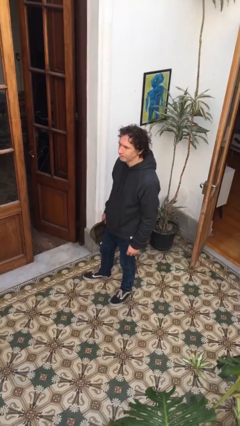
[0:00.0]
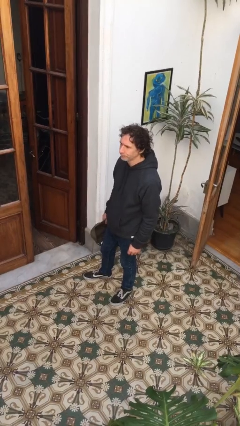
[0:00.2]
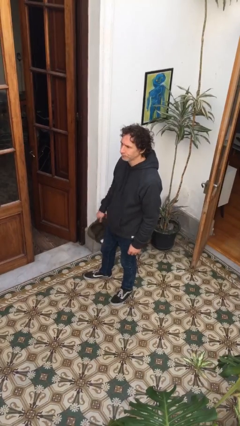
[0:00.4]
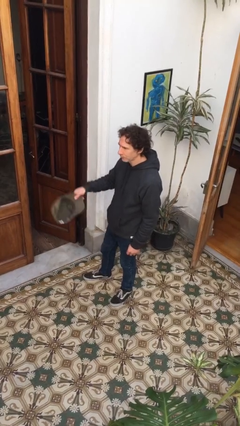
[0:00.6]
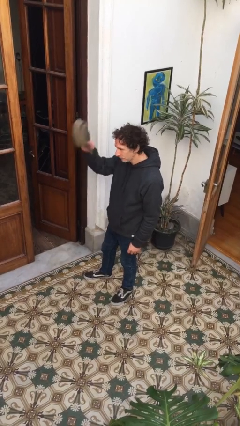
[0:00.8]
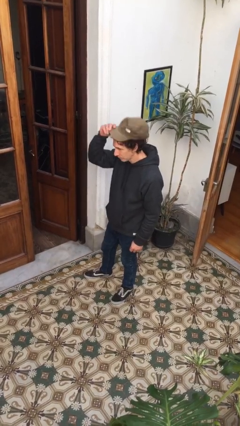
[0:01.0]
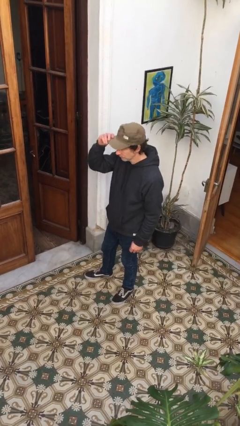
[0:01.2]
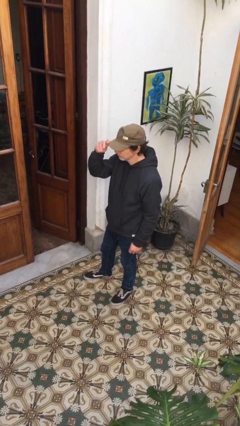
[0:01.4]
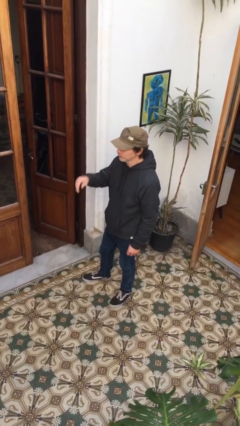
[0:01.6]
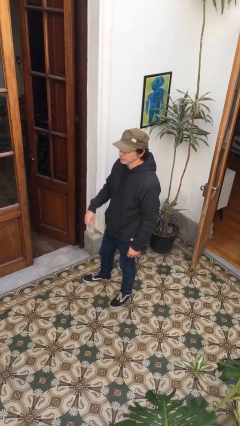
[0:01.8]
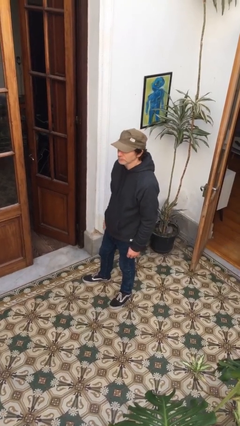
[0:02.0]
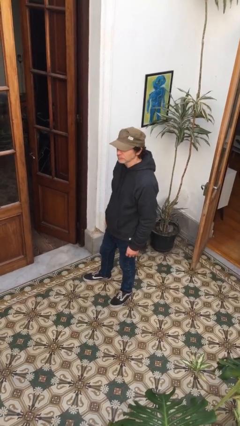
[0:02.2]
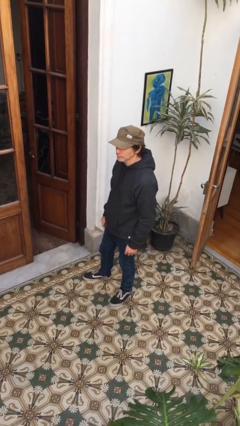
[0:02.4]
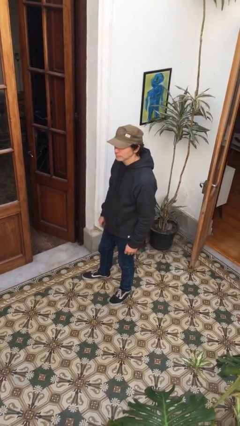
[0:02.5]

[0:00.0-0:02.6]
person puts on hat

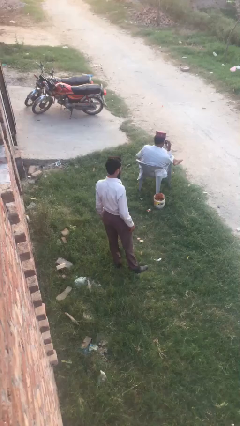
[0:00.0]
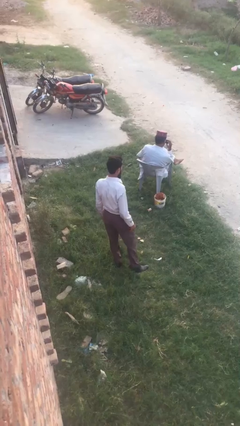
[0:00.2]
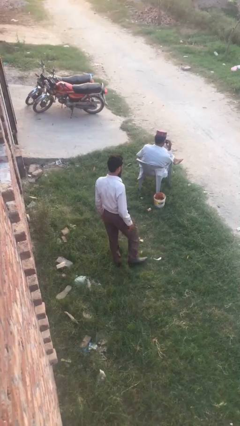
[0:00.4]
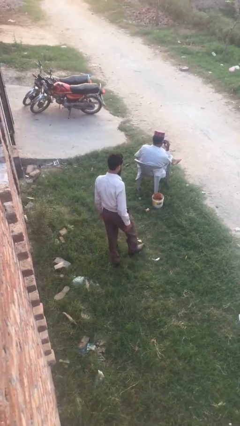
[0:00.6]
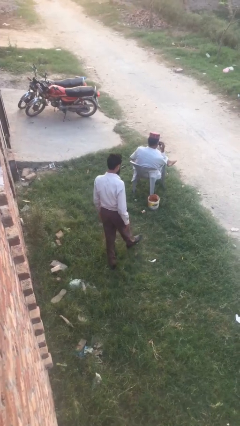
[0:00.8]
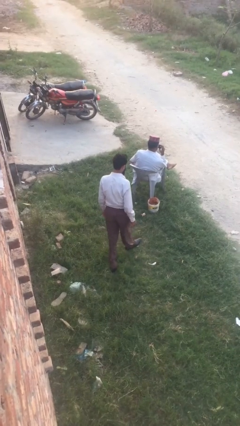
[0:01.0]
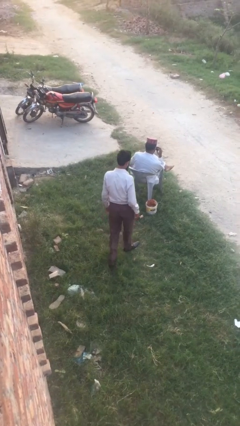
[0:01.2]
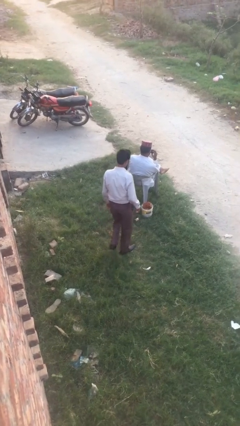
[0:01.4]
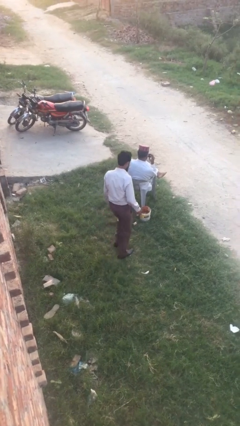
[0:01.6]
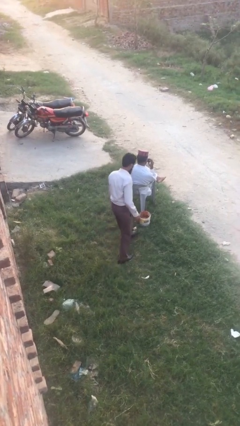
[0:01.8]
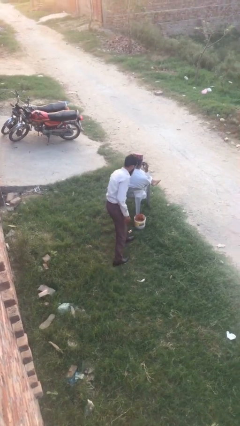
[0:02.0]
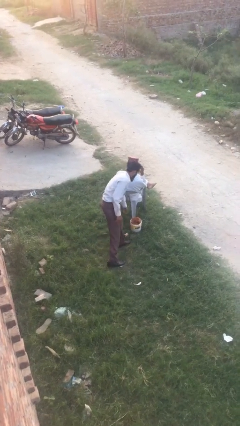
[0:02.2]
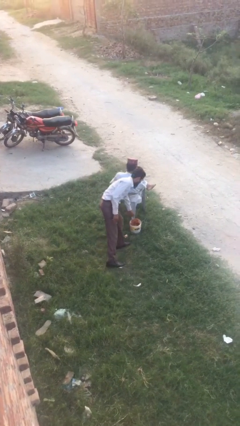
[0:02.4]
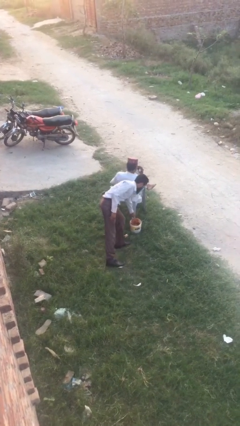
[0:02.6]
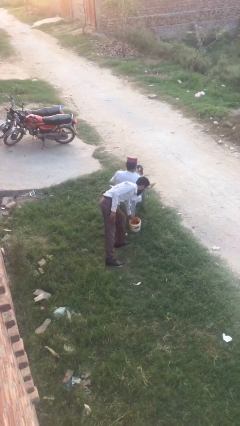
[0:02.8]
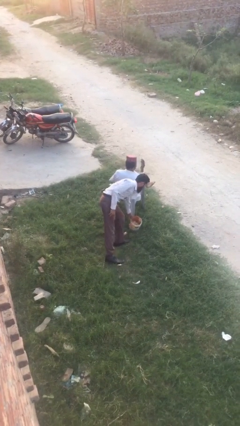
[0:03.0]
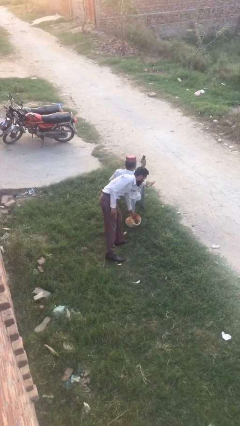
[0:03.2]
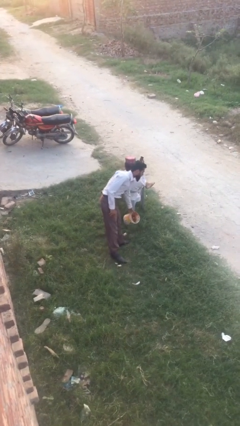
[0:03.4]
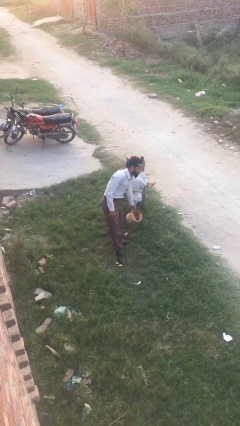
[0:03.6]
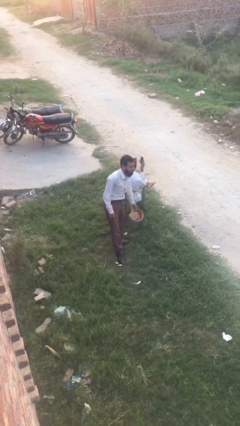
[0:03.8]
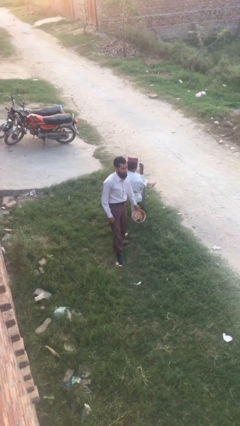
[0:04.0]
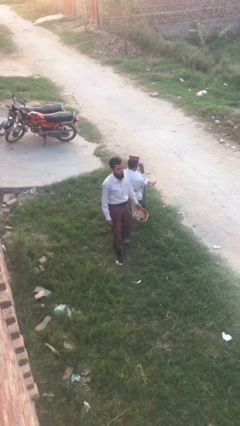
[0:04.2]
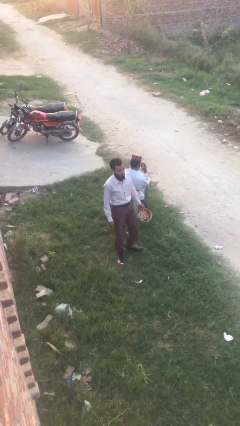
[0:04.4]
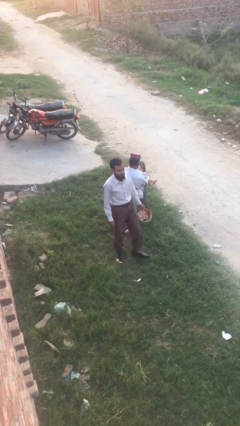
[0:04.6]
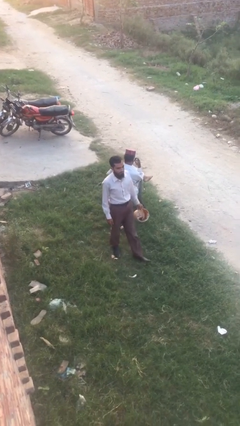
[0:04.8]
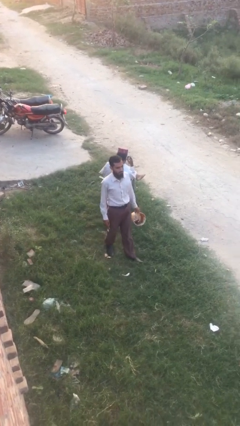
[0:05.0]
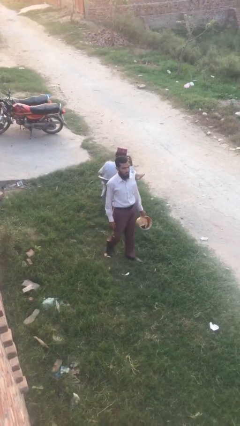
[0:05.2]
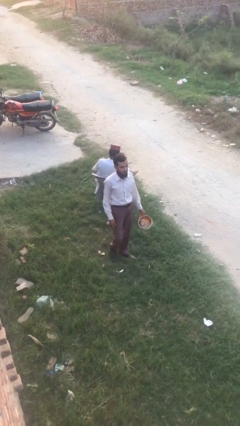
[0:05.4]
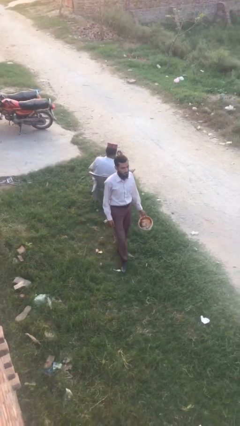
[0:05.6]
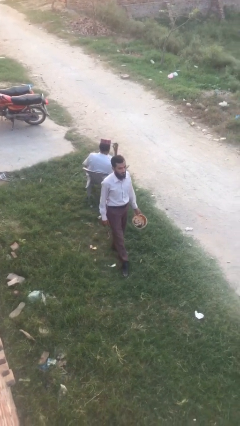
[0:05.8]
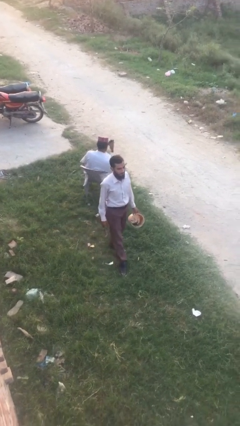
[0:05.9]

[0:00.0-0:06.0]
person steals object from person

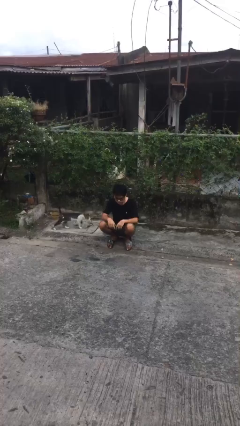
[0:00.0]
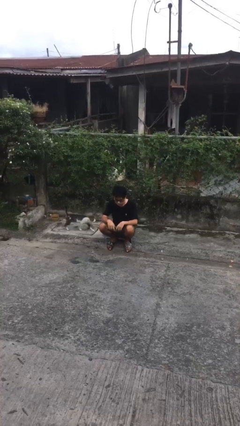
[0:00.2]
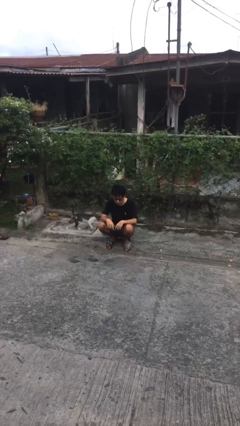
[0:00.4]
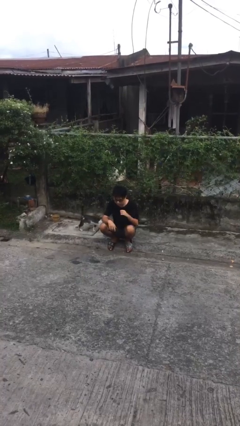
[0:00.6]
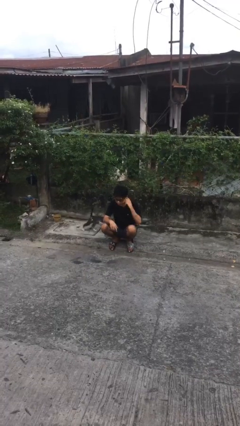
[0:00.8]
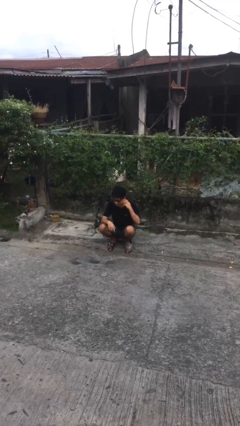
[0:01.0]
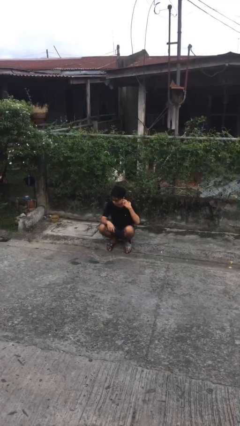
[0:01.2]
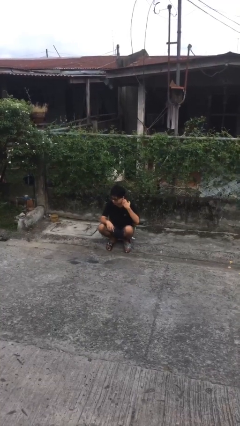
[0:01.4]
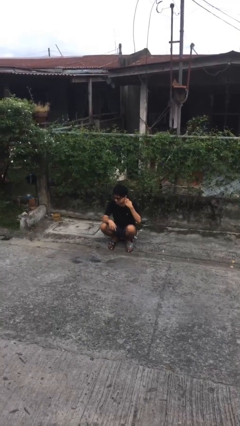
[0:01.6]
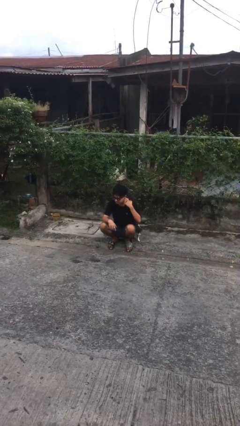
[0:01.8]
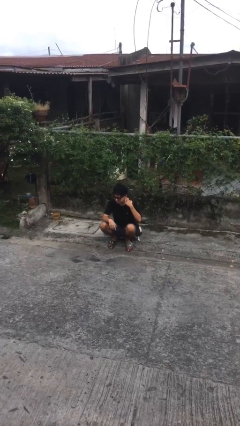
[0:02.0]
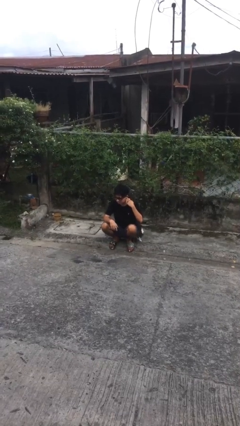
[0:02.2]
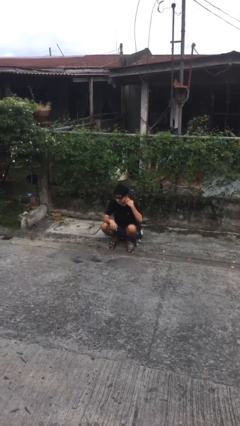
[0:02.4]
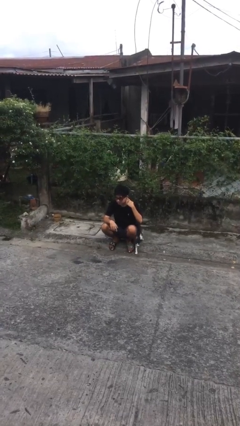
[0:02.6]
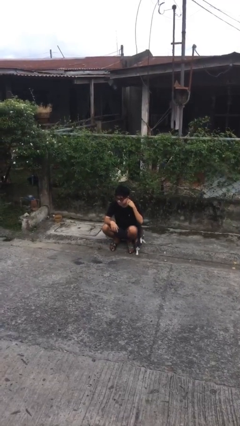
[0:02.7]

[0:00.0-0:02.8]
person touches earlobe

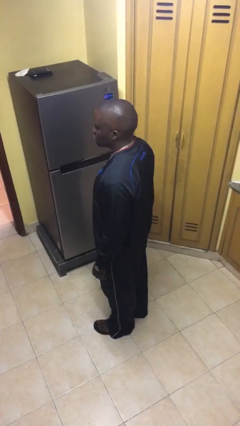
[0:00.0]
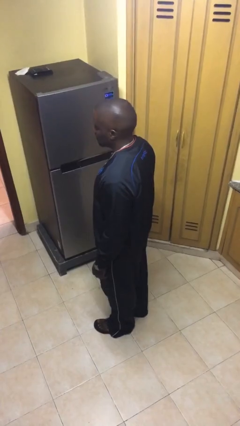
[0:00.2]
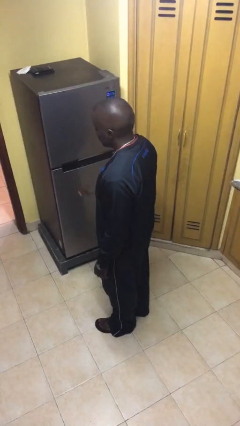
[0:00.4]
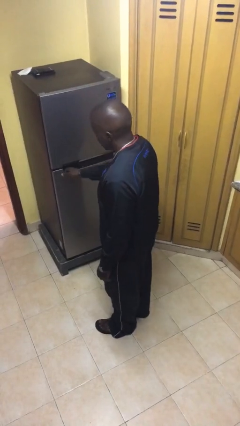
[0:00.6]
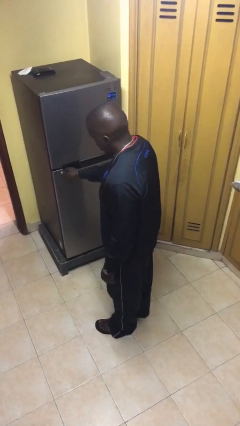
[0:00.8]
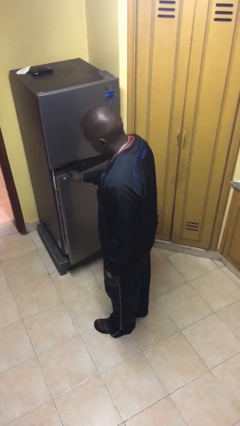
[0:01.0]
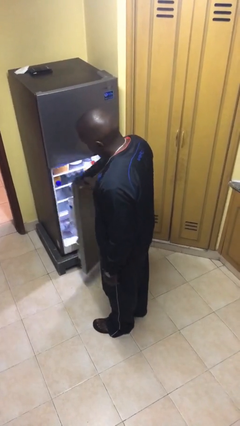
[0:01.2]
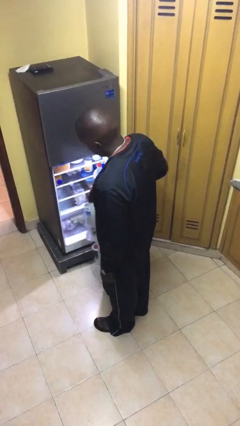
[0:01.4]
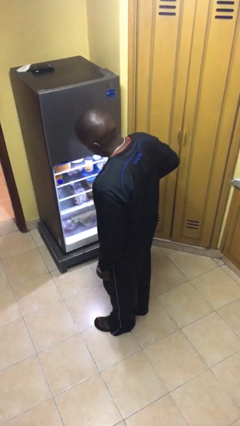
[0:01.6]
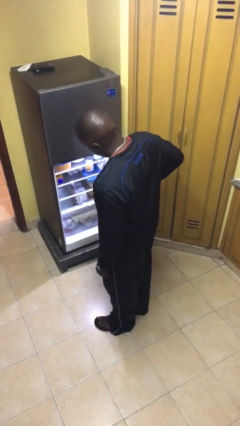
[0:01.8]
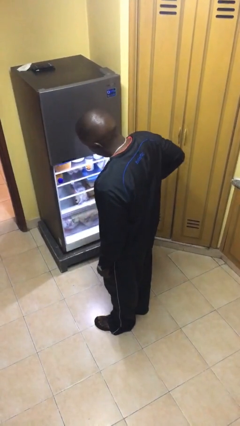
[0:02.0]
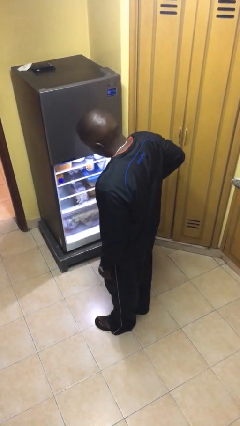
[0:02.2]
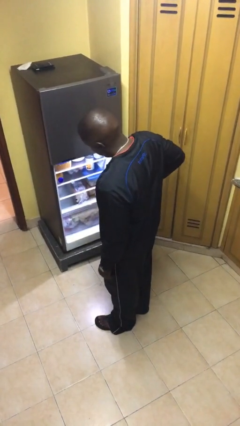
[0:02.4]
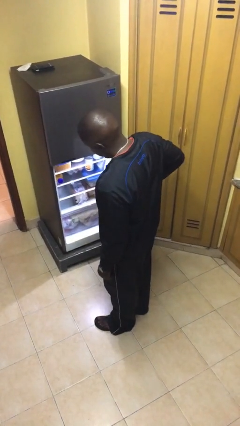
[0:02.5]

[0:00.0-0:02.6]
person opens refrigerator

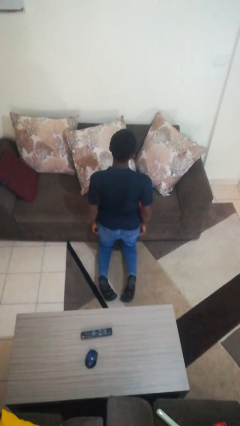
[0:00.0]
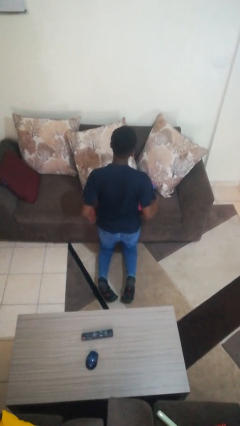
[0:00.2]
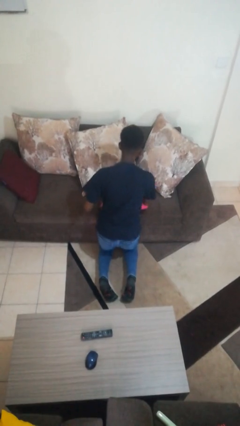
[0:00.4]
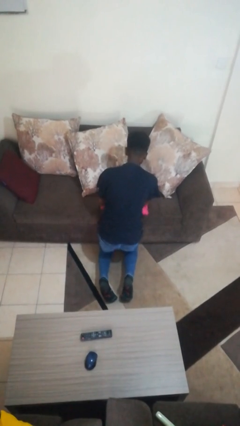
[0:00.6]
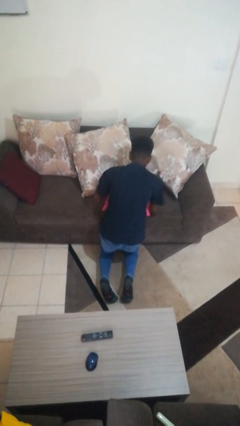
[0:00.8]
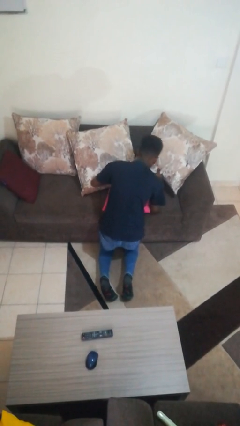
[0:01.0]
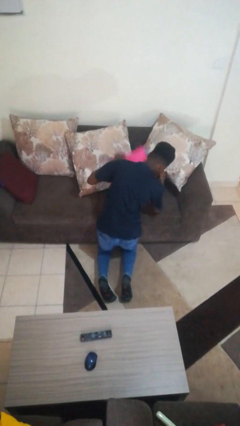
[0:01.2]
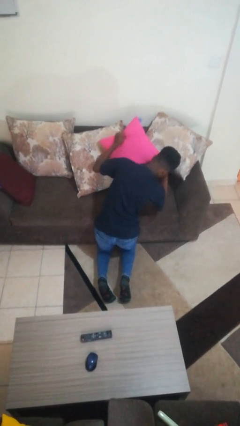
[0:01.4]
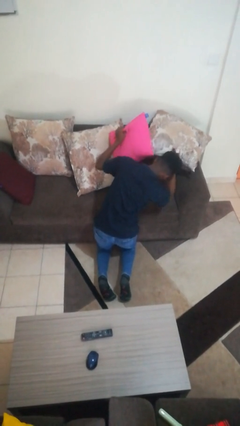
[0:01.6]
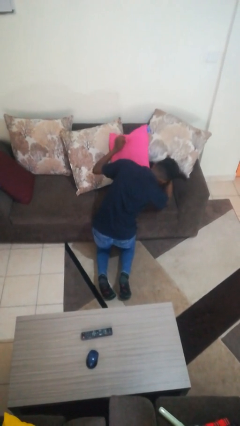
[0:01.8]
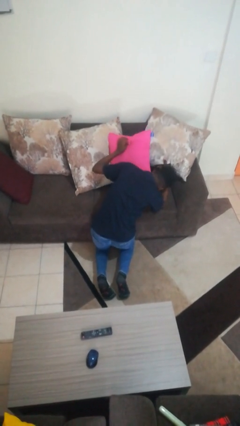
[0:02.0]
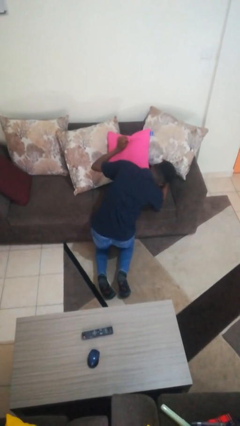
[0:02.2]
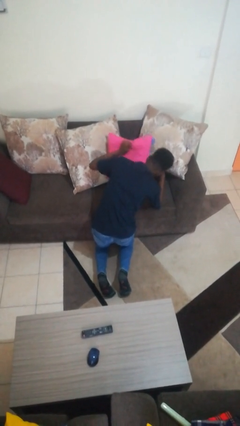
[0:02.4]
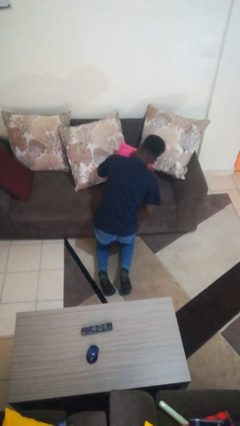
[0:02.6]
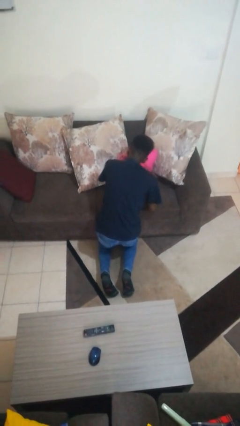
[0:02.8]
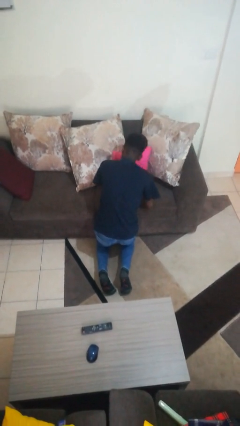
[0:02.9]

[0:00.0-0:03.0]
person searches in couch

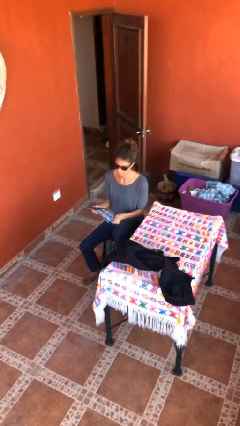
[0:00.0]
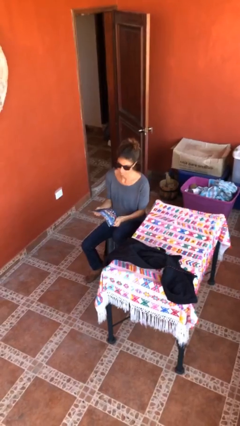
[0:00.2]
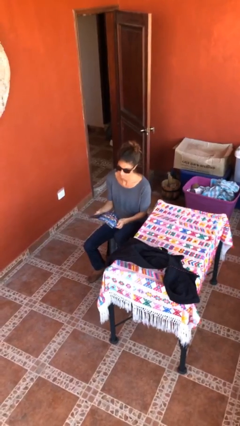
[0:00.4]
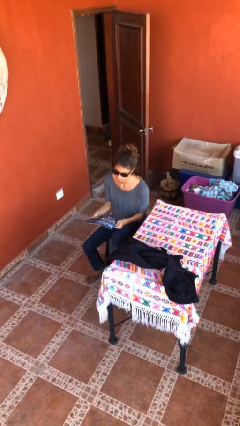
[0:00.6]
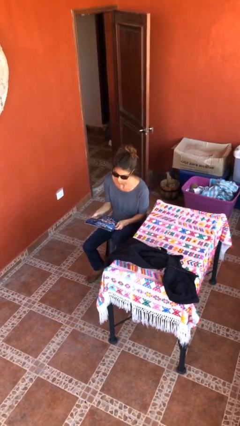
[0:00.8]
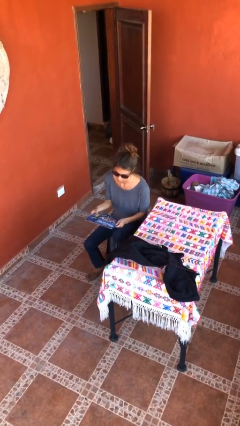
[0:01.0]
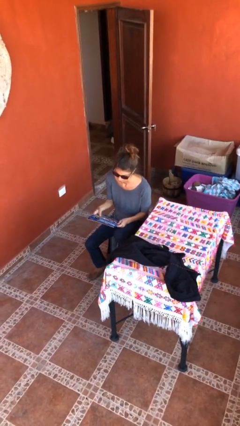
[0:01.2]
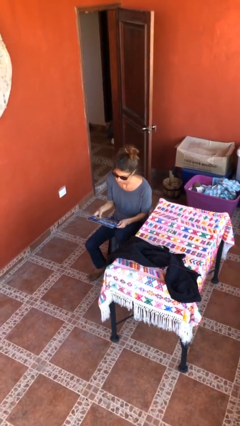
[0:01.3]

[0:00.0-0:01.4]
person reads document
